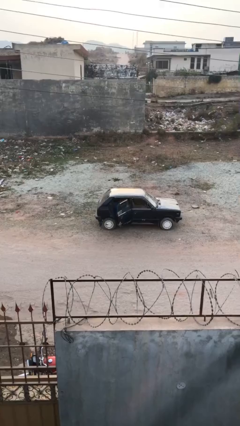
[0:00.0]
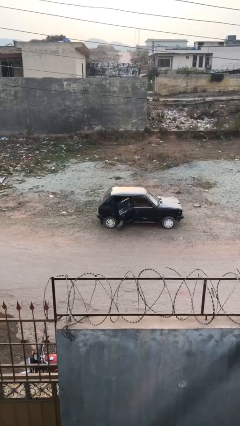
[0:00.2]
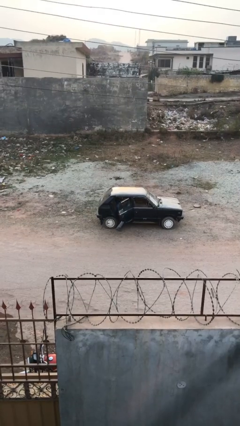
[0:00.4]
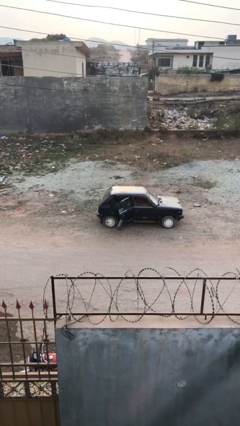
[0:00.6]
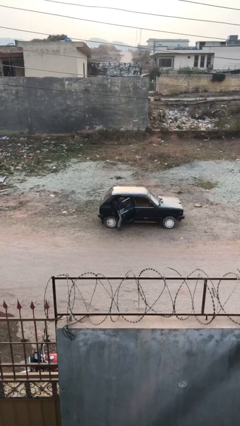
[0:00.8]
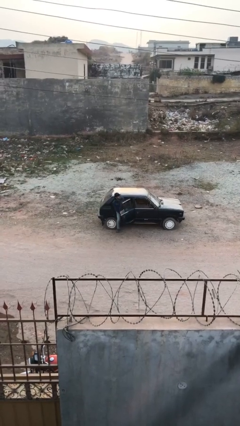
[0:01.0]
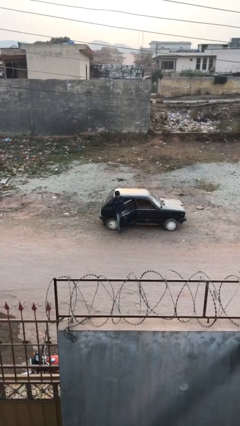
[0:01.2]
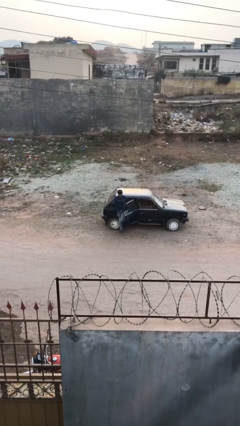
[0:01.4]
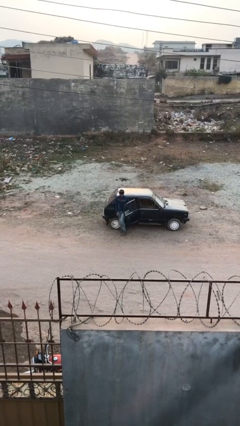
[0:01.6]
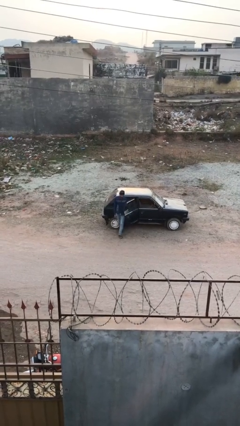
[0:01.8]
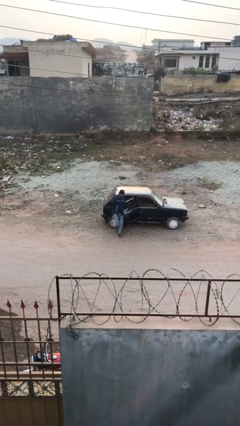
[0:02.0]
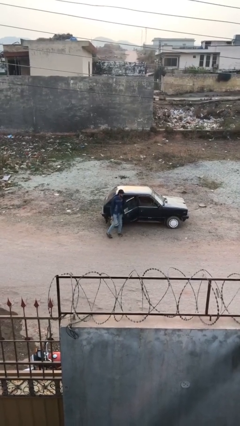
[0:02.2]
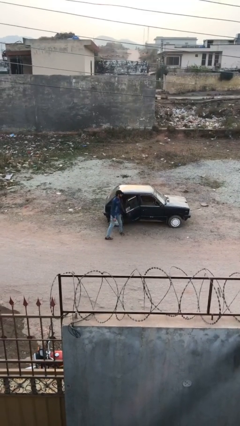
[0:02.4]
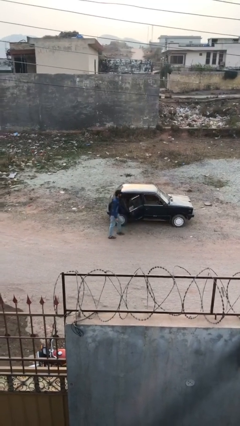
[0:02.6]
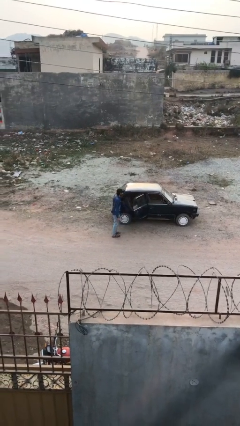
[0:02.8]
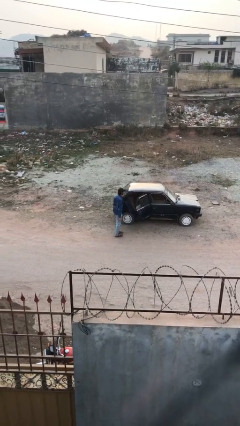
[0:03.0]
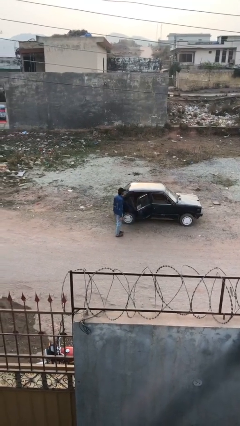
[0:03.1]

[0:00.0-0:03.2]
person exits car

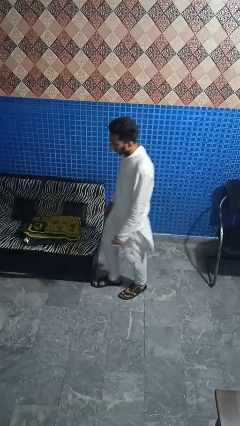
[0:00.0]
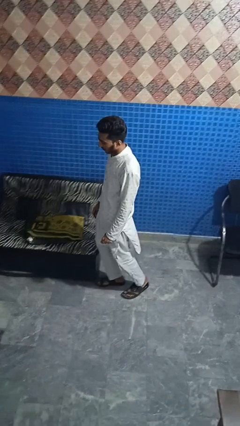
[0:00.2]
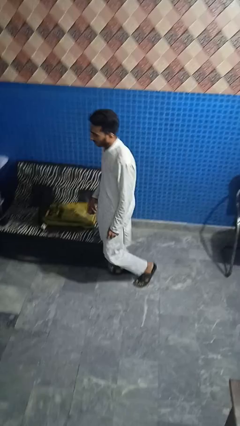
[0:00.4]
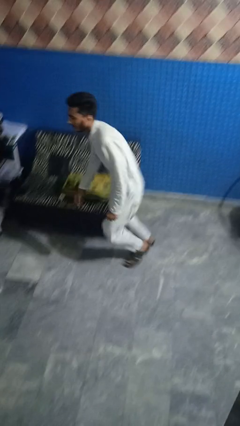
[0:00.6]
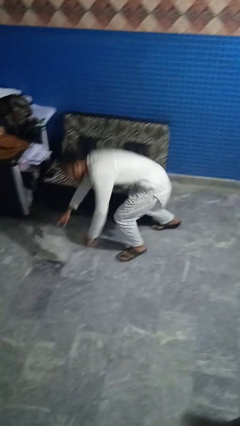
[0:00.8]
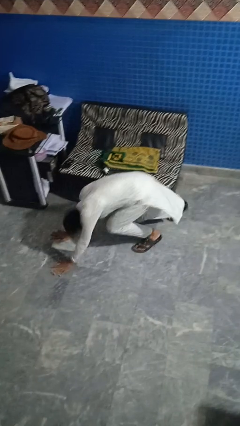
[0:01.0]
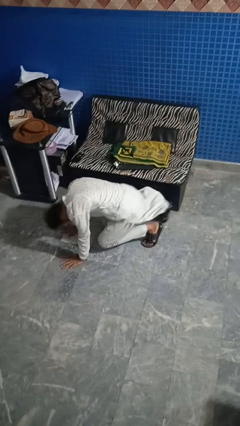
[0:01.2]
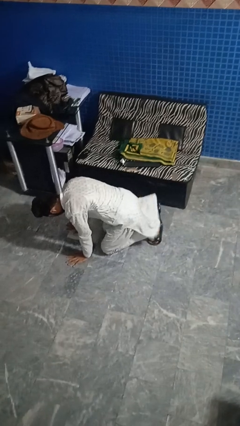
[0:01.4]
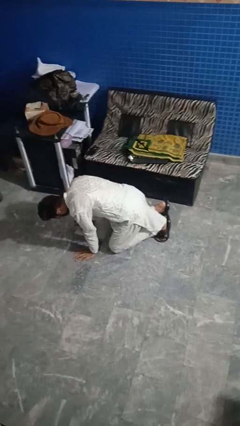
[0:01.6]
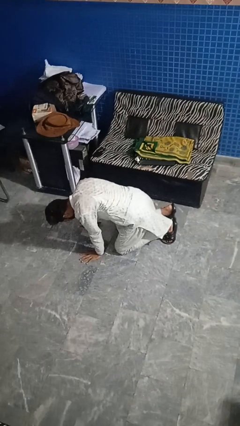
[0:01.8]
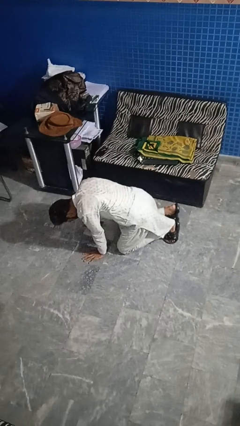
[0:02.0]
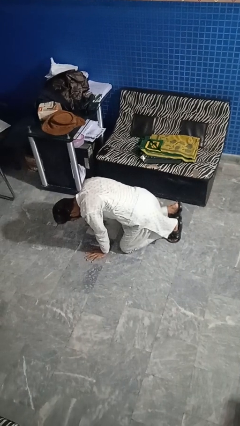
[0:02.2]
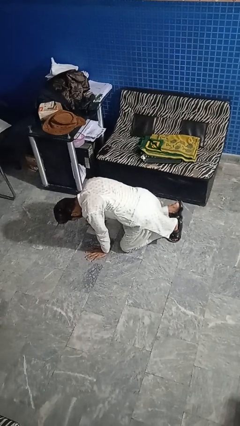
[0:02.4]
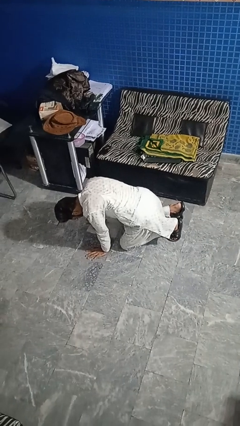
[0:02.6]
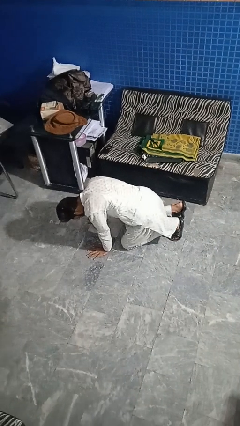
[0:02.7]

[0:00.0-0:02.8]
person trips on object on floor

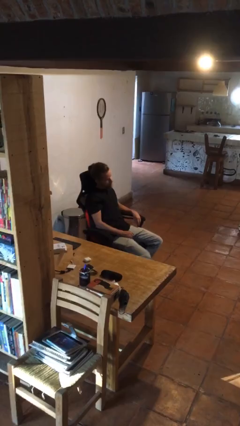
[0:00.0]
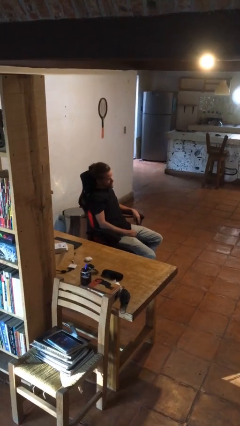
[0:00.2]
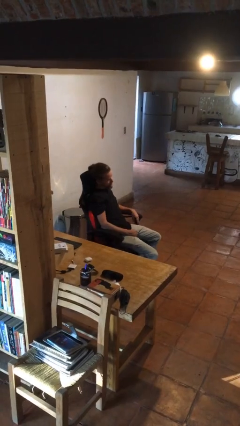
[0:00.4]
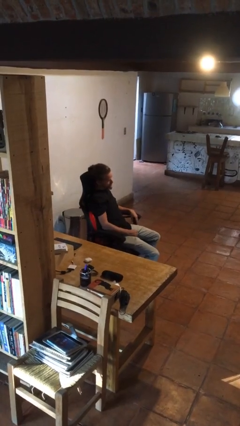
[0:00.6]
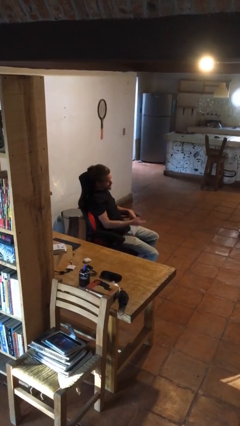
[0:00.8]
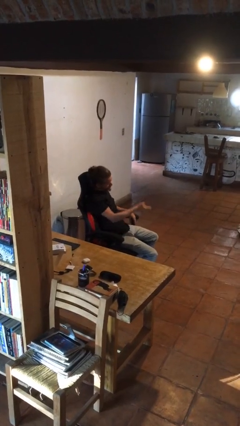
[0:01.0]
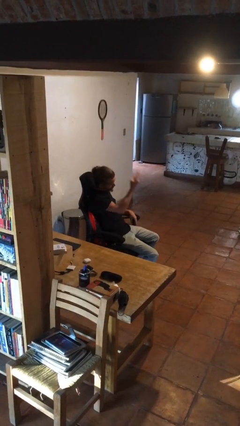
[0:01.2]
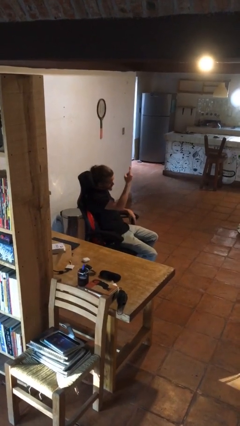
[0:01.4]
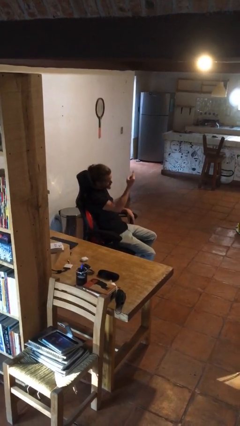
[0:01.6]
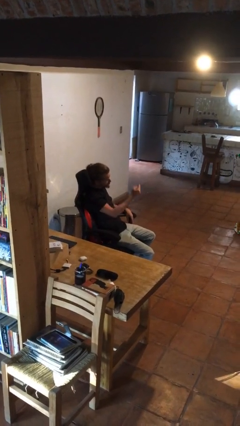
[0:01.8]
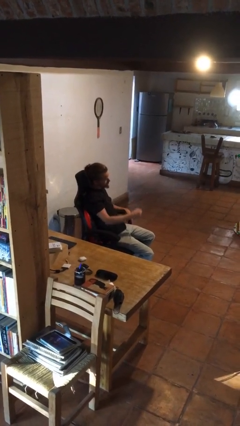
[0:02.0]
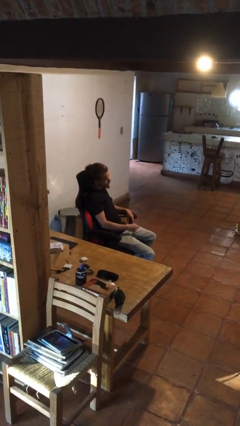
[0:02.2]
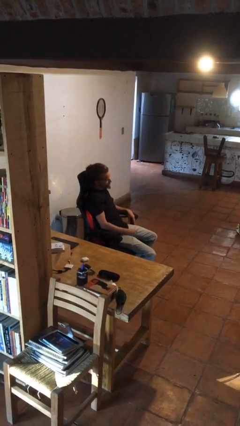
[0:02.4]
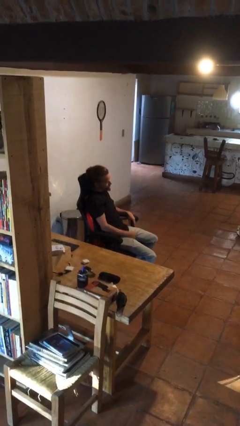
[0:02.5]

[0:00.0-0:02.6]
person gestures swipe up

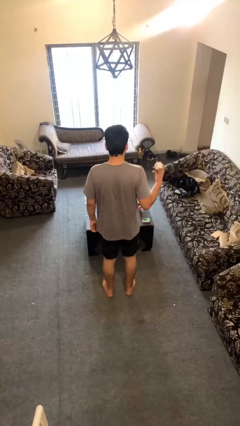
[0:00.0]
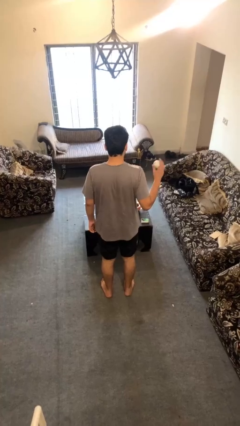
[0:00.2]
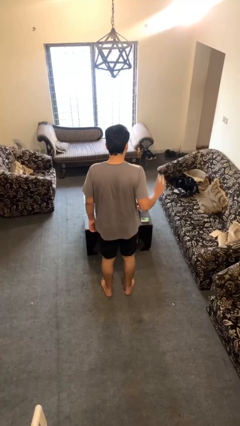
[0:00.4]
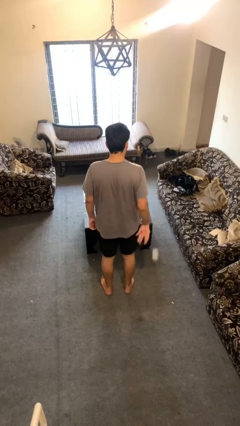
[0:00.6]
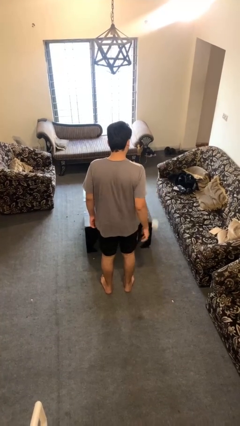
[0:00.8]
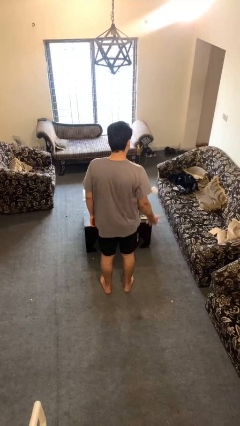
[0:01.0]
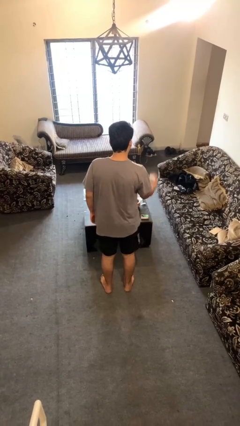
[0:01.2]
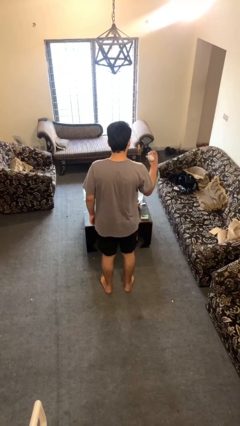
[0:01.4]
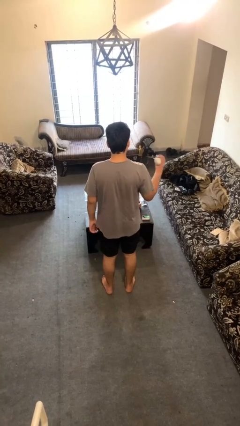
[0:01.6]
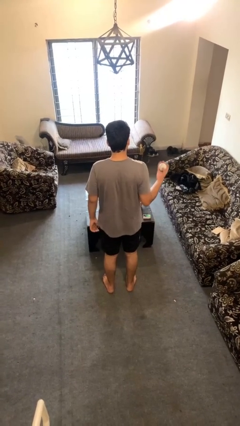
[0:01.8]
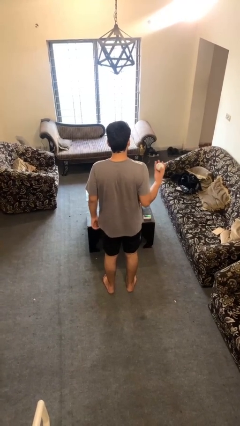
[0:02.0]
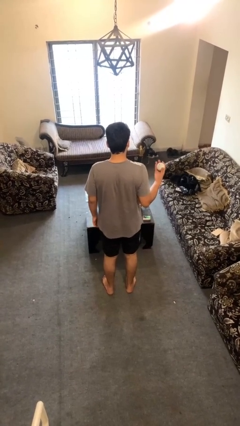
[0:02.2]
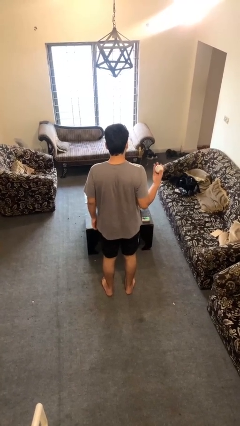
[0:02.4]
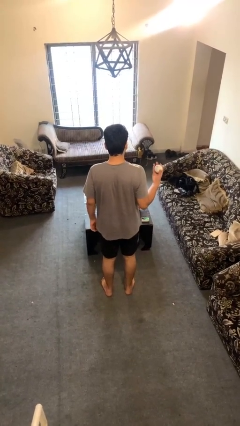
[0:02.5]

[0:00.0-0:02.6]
person bounces ball on floor

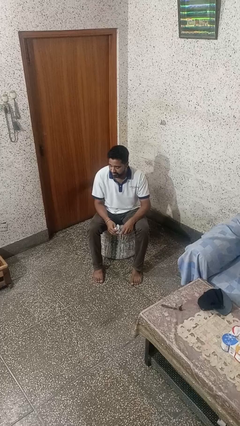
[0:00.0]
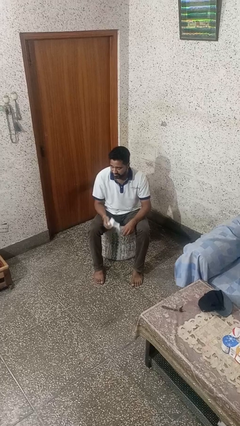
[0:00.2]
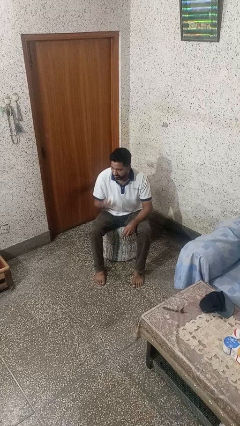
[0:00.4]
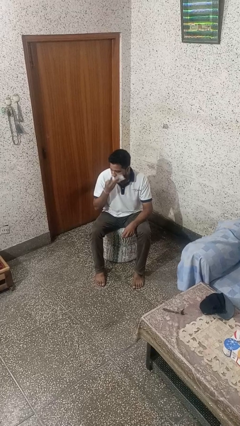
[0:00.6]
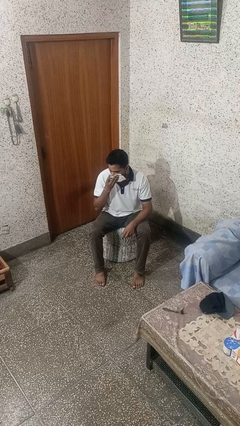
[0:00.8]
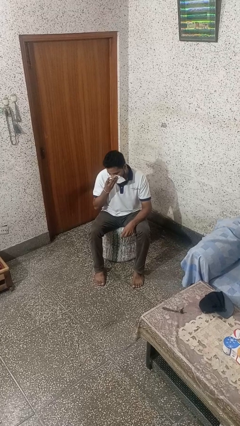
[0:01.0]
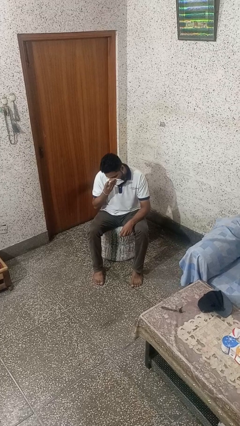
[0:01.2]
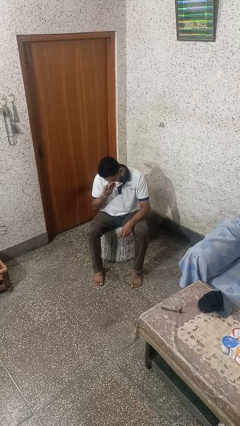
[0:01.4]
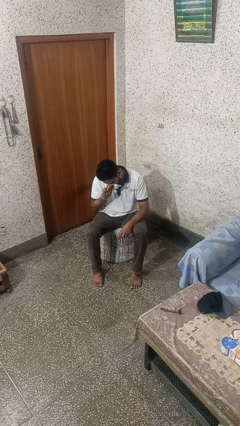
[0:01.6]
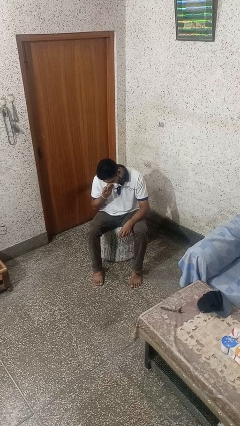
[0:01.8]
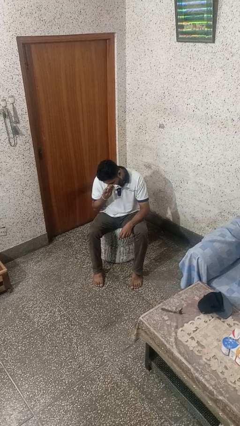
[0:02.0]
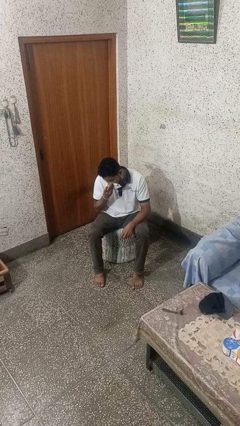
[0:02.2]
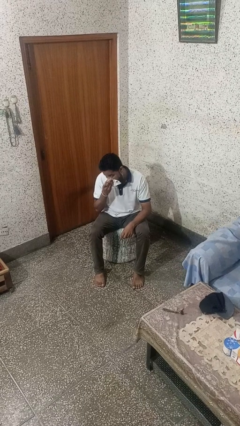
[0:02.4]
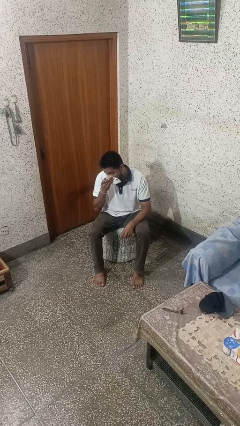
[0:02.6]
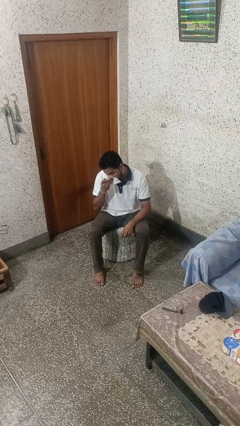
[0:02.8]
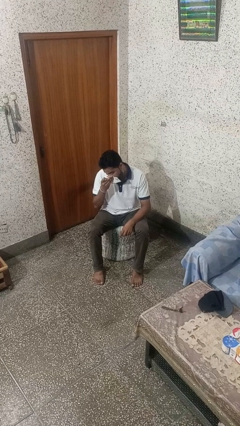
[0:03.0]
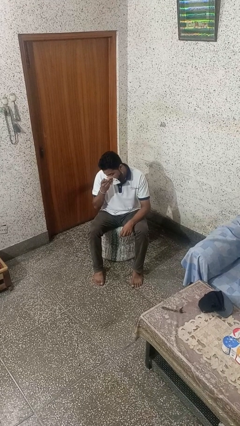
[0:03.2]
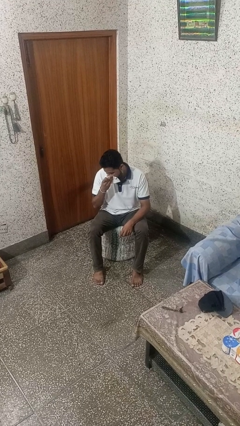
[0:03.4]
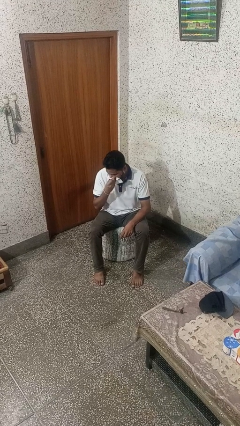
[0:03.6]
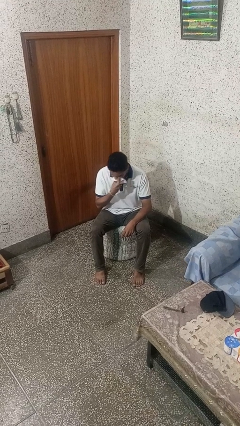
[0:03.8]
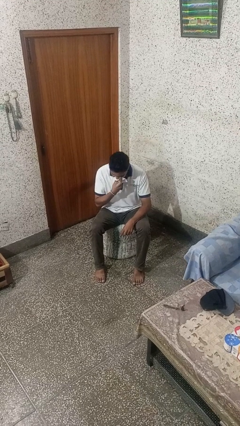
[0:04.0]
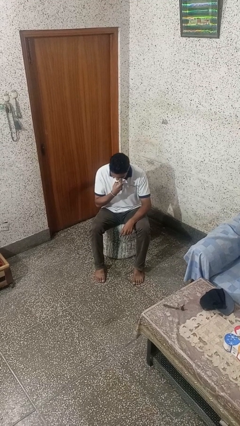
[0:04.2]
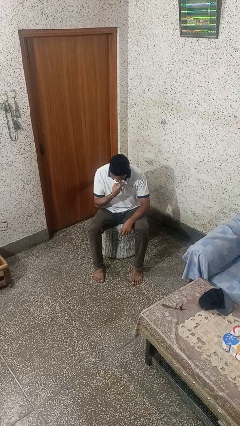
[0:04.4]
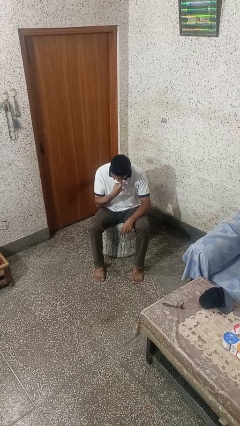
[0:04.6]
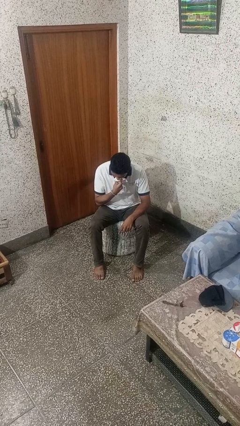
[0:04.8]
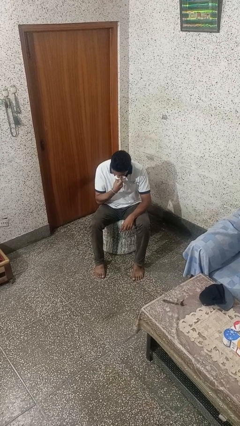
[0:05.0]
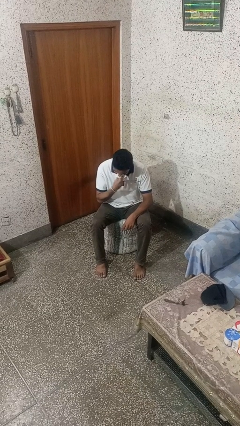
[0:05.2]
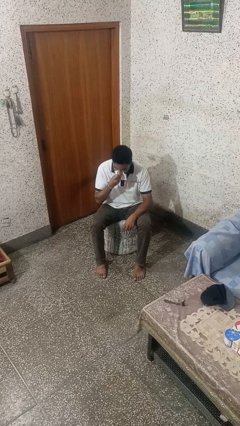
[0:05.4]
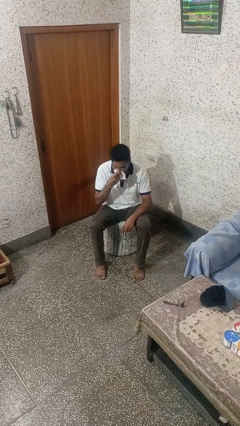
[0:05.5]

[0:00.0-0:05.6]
person blows nose

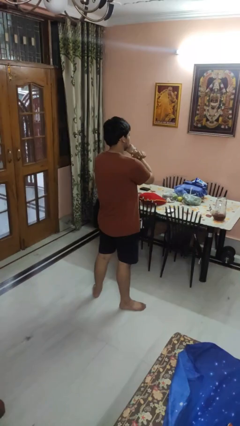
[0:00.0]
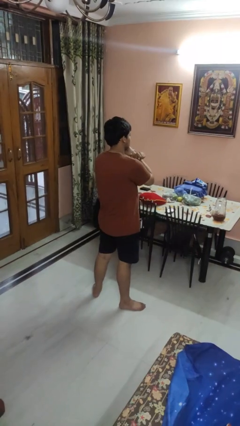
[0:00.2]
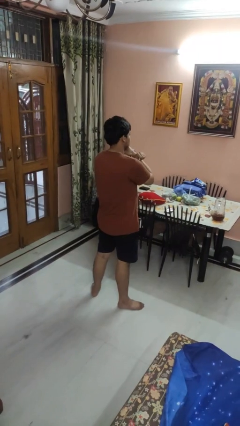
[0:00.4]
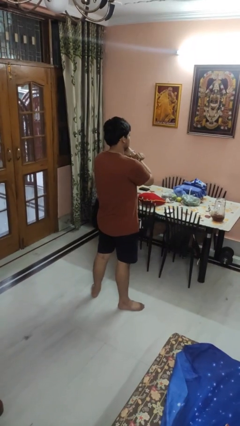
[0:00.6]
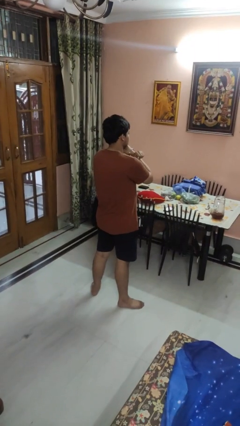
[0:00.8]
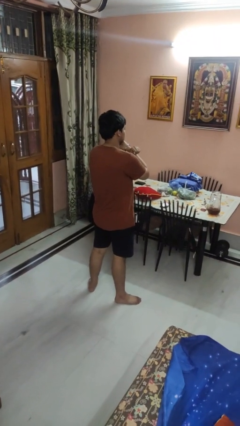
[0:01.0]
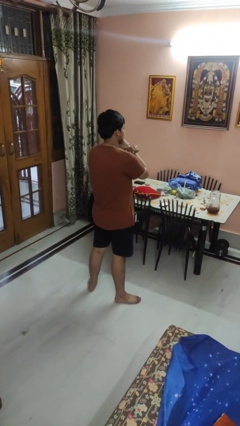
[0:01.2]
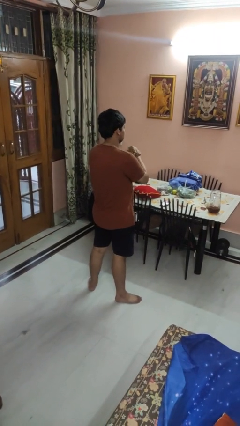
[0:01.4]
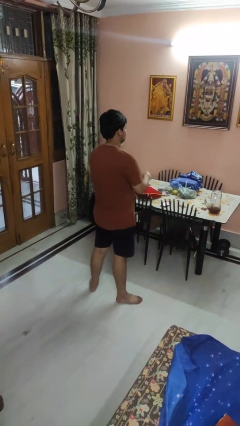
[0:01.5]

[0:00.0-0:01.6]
person gestures arms x
